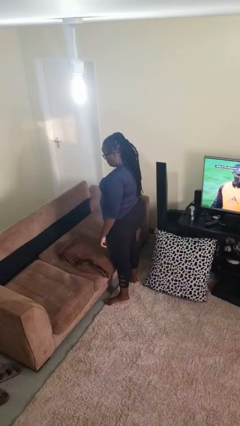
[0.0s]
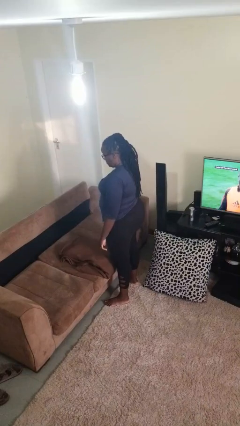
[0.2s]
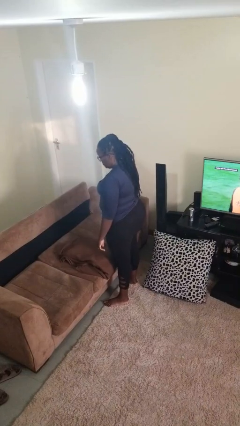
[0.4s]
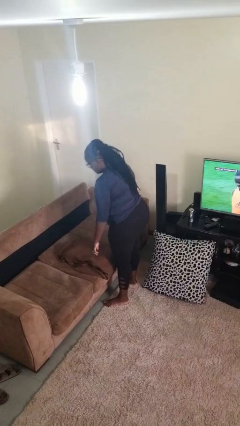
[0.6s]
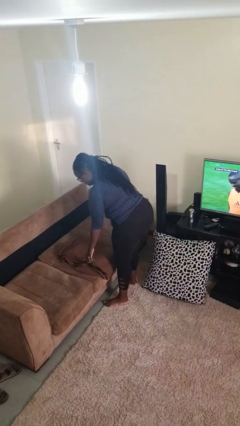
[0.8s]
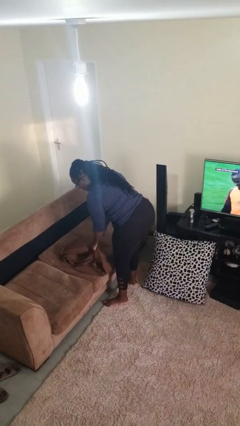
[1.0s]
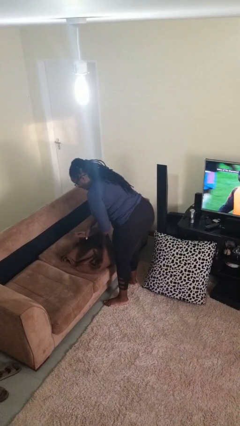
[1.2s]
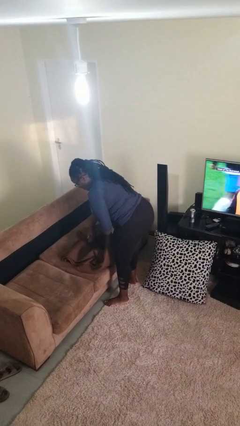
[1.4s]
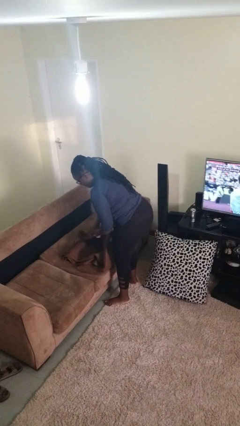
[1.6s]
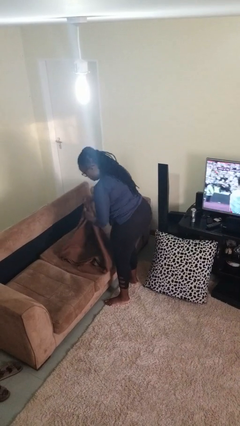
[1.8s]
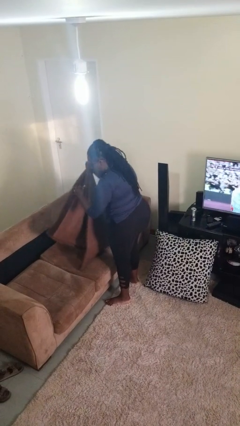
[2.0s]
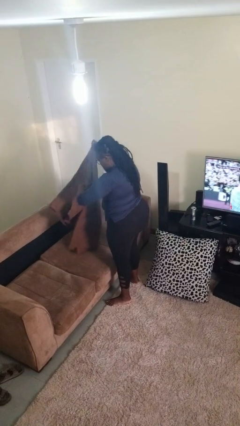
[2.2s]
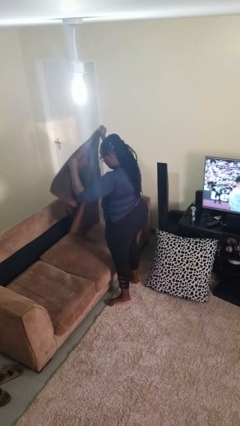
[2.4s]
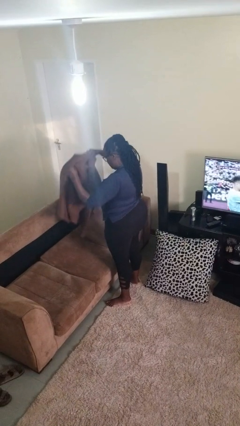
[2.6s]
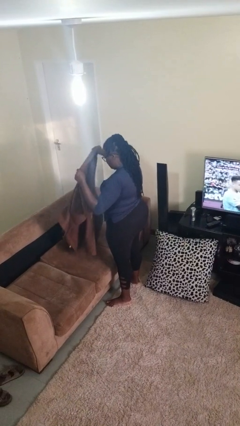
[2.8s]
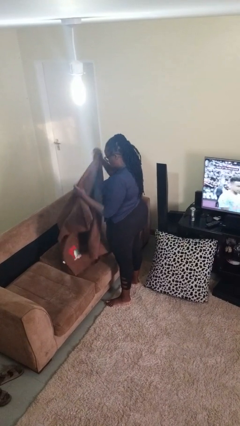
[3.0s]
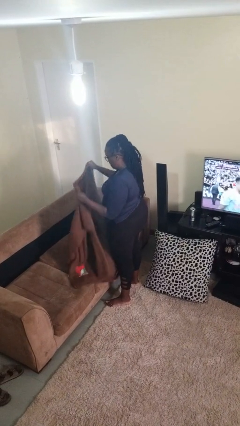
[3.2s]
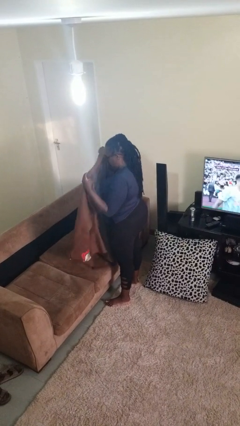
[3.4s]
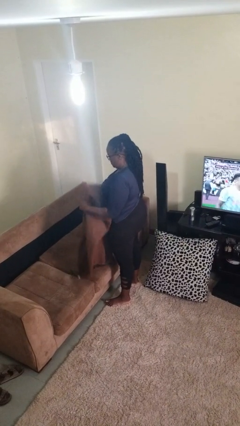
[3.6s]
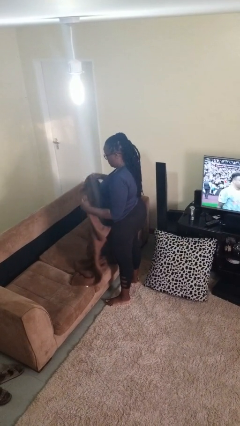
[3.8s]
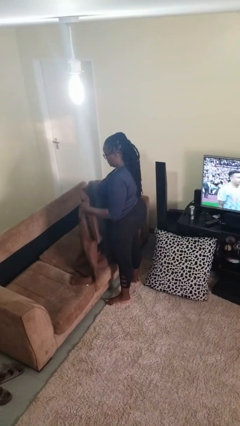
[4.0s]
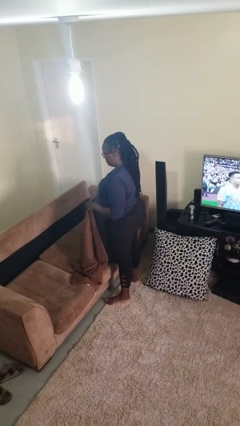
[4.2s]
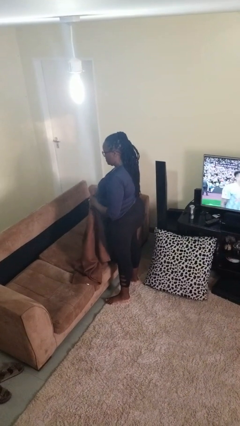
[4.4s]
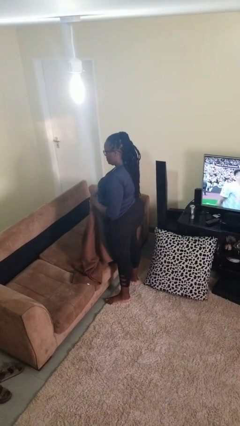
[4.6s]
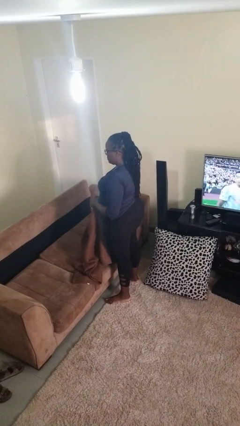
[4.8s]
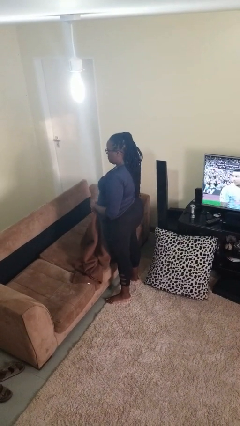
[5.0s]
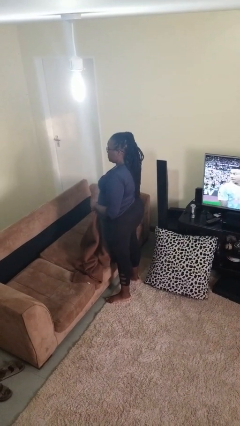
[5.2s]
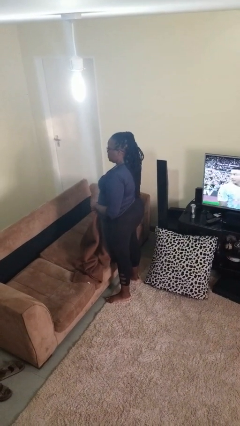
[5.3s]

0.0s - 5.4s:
person unfolds blanket

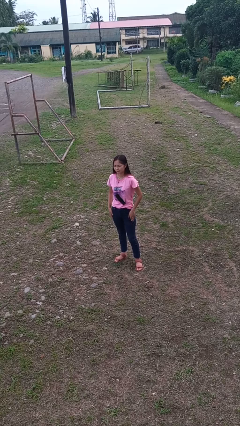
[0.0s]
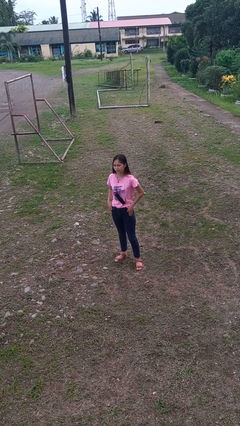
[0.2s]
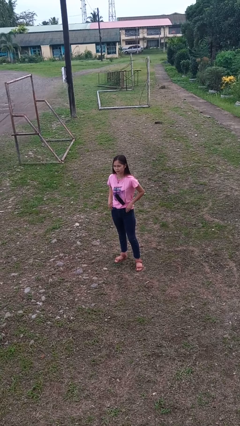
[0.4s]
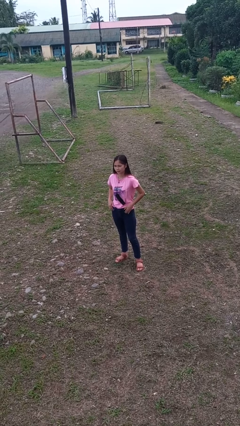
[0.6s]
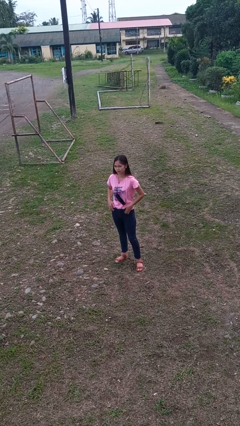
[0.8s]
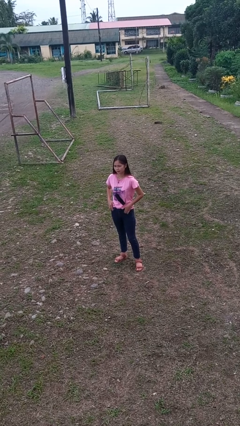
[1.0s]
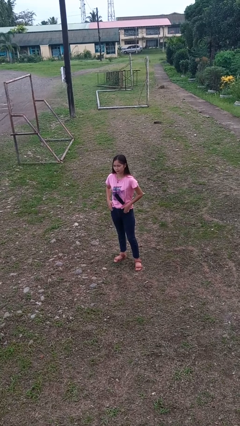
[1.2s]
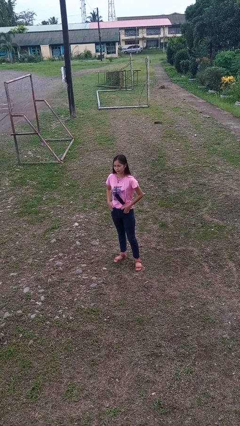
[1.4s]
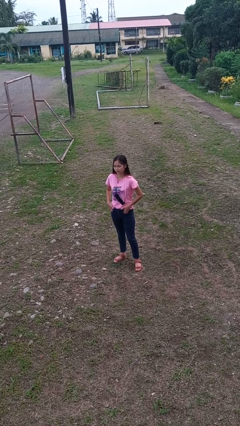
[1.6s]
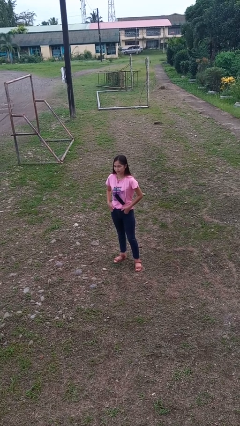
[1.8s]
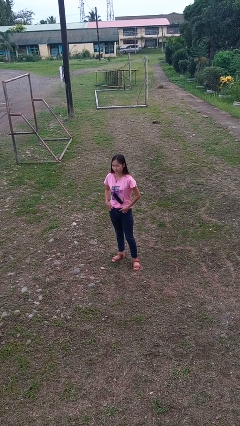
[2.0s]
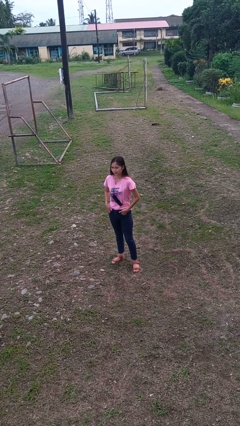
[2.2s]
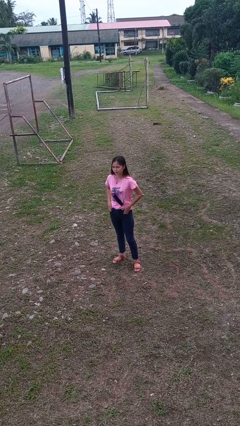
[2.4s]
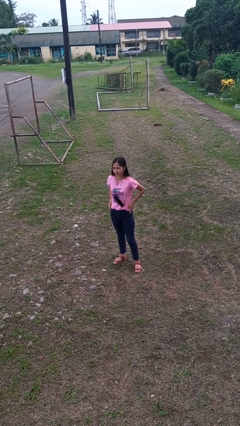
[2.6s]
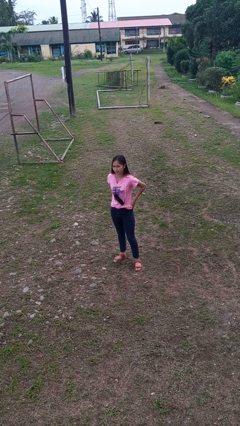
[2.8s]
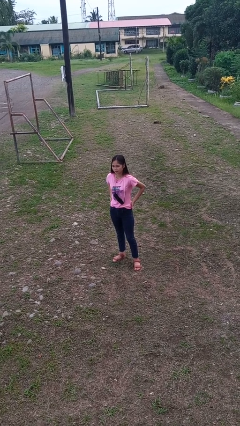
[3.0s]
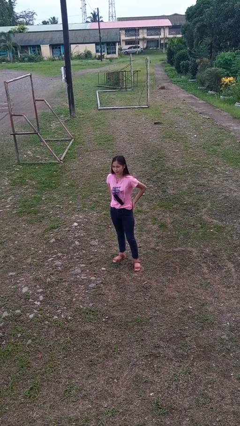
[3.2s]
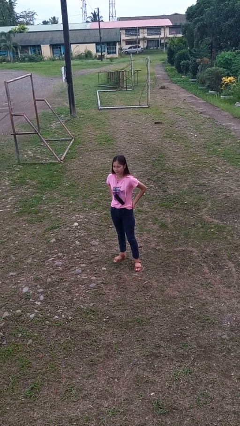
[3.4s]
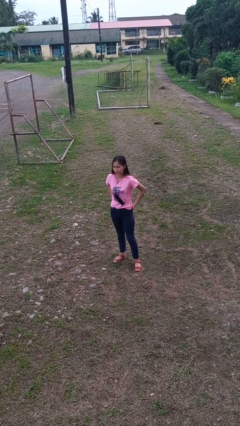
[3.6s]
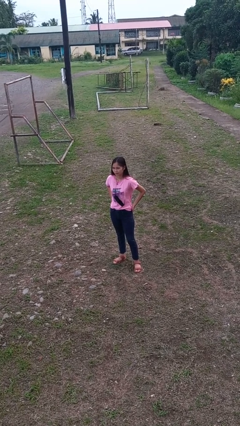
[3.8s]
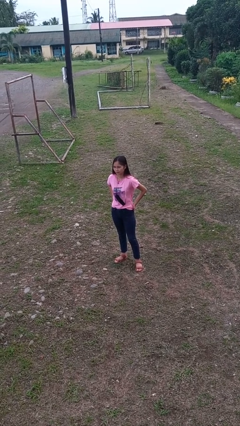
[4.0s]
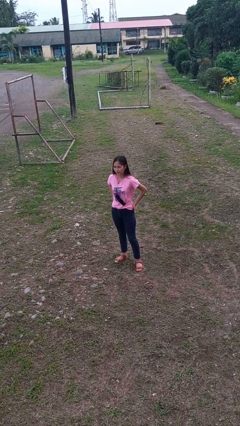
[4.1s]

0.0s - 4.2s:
person puts hands in back pockets

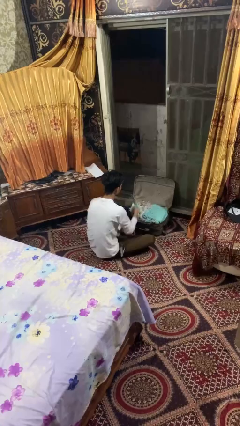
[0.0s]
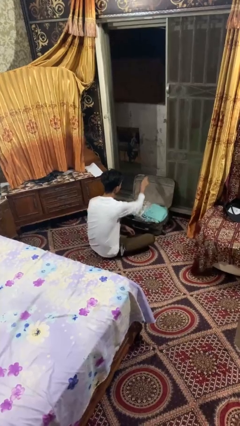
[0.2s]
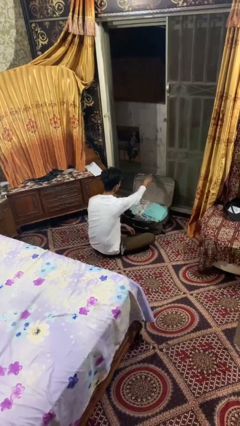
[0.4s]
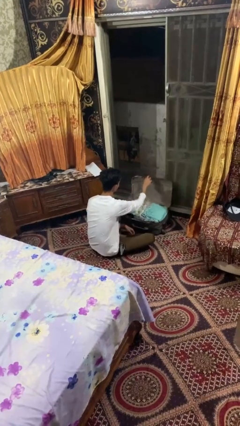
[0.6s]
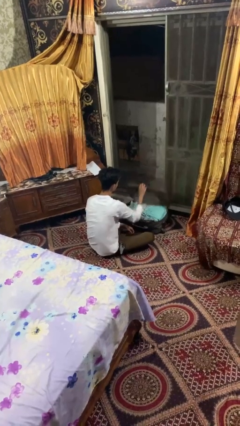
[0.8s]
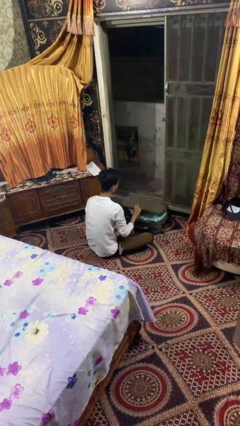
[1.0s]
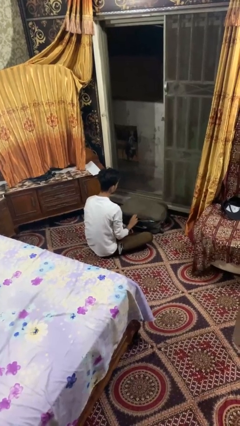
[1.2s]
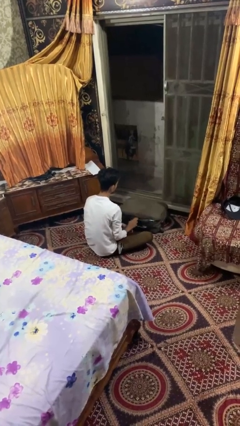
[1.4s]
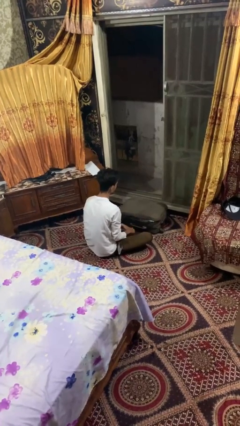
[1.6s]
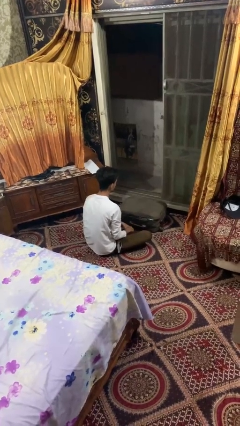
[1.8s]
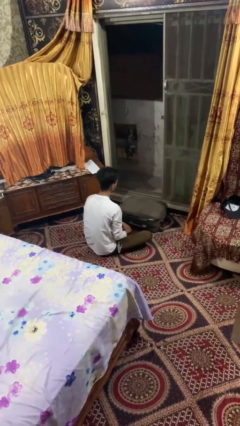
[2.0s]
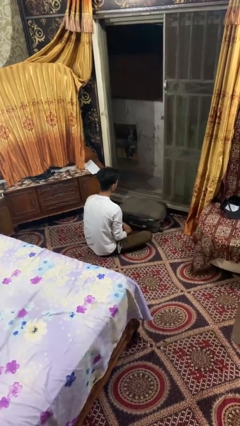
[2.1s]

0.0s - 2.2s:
person closes suitcase

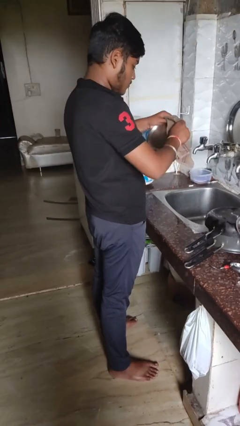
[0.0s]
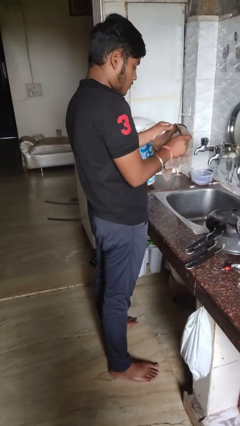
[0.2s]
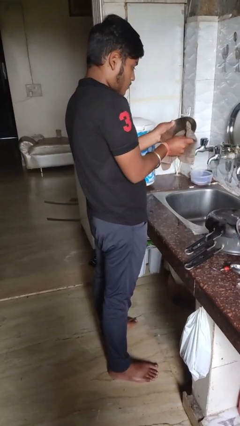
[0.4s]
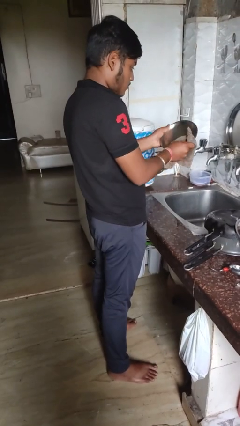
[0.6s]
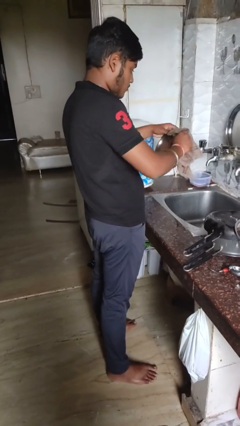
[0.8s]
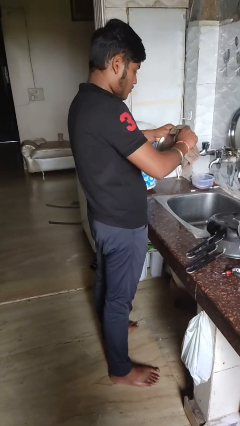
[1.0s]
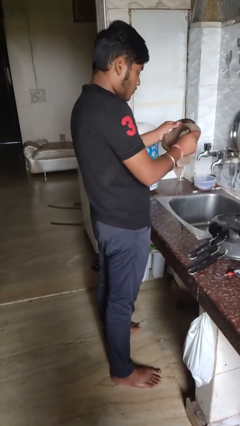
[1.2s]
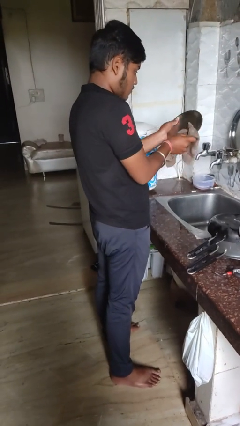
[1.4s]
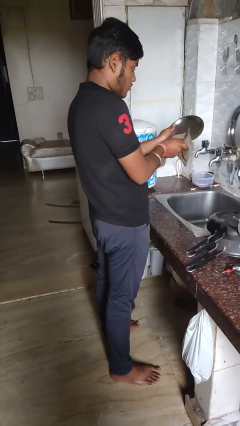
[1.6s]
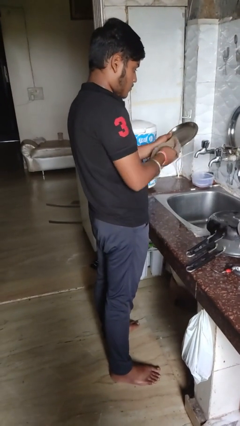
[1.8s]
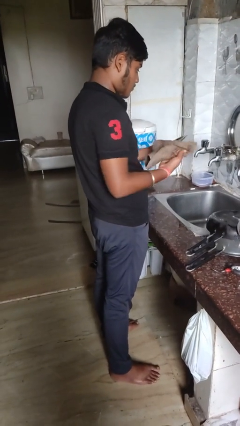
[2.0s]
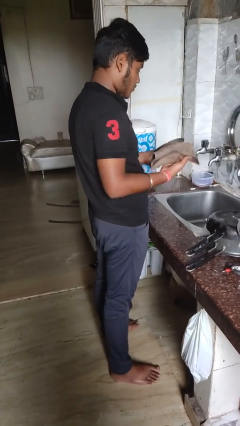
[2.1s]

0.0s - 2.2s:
person dries dish

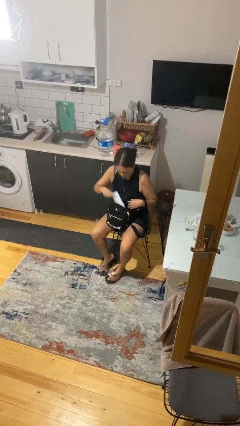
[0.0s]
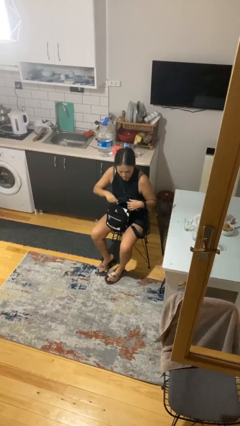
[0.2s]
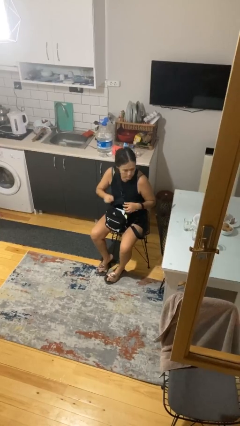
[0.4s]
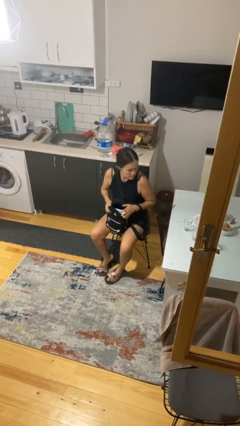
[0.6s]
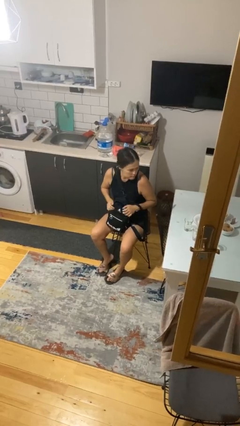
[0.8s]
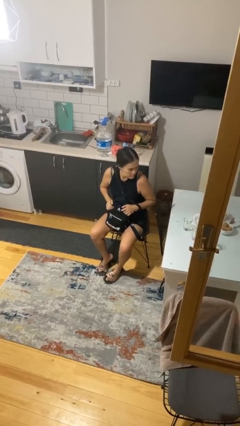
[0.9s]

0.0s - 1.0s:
person puts object into backpack

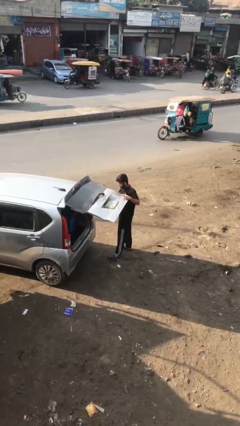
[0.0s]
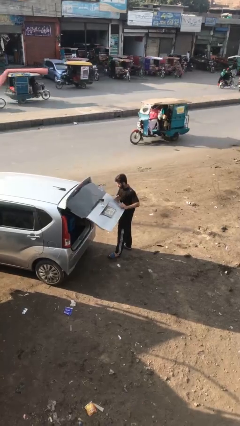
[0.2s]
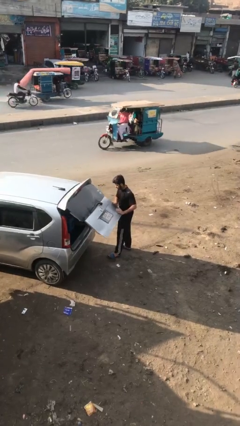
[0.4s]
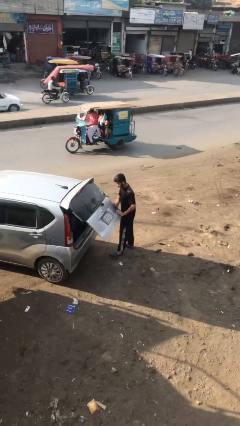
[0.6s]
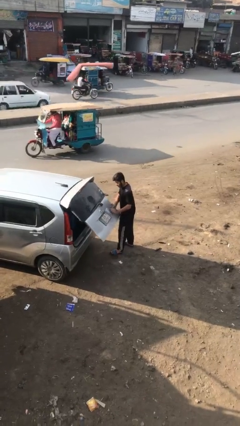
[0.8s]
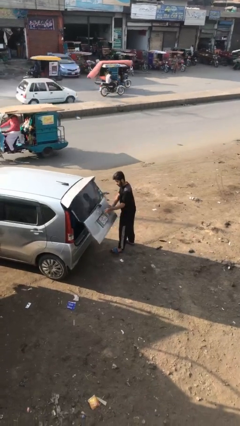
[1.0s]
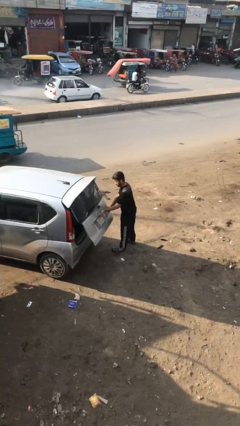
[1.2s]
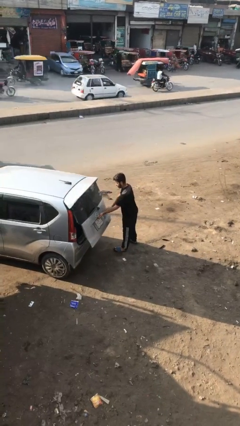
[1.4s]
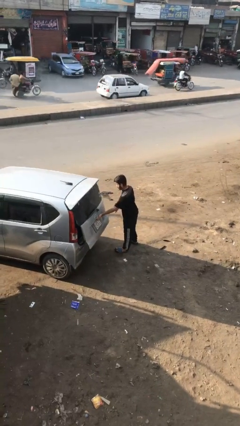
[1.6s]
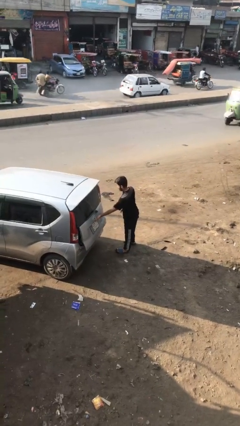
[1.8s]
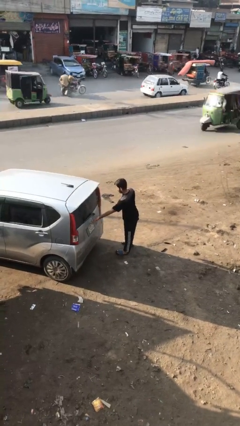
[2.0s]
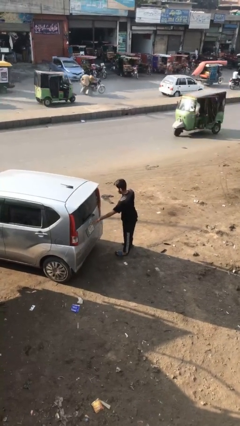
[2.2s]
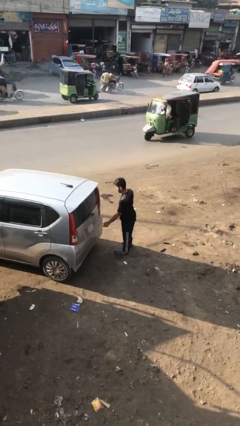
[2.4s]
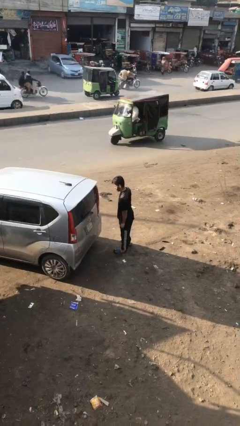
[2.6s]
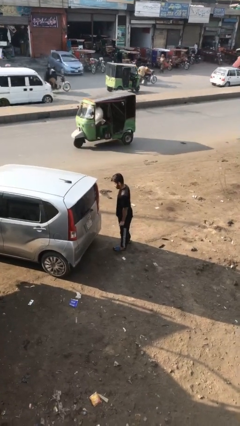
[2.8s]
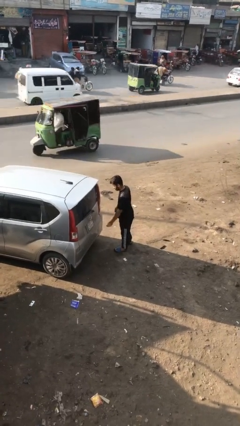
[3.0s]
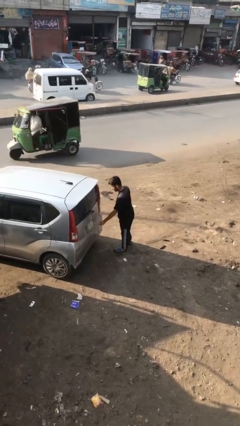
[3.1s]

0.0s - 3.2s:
person closes car trunk
